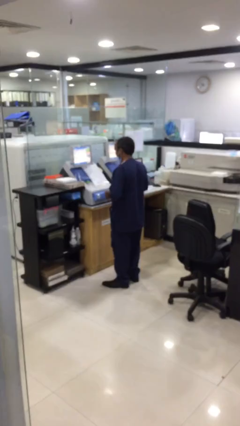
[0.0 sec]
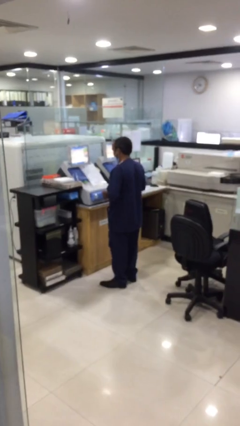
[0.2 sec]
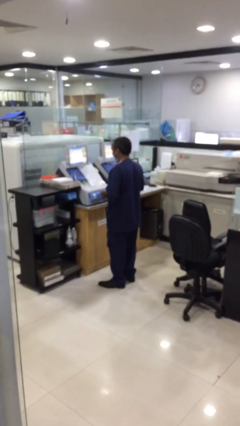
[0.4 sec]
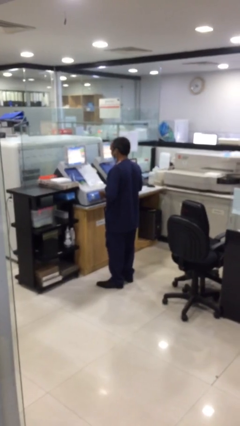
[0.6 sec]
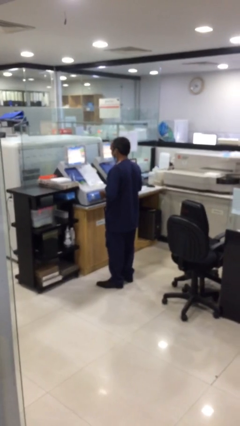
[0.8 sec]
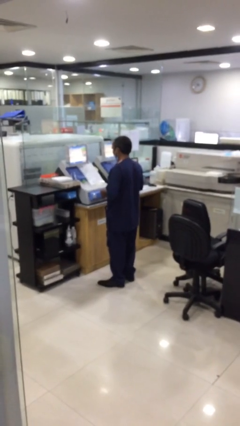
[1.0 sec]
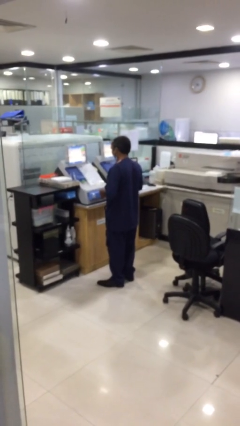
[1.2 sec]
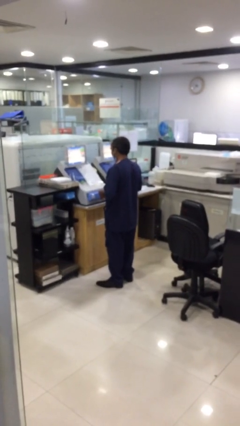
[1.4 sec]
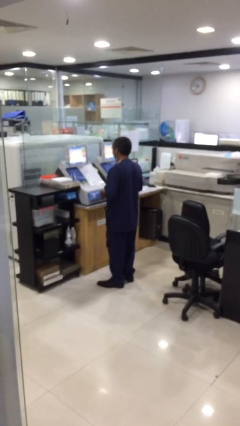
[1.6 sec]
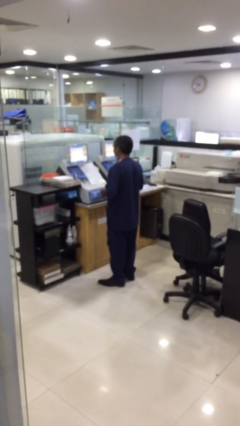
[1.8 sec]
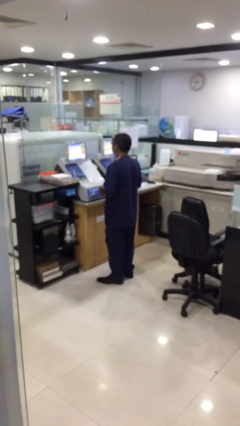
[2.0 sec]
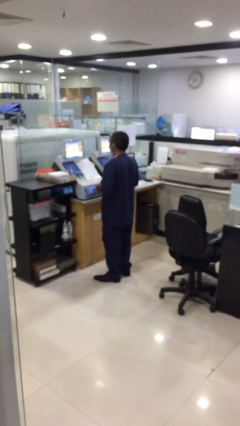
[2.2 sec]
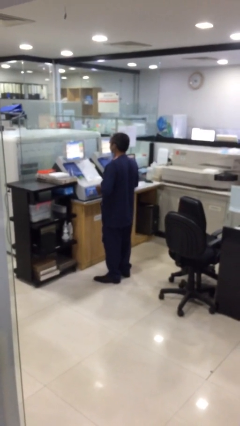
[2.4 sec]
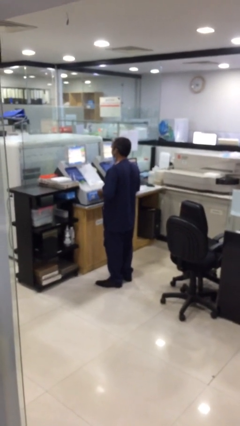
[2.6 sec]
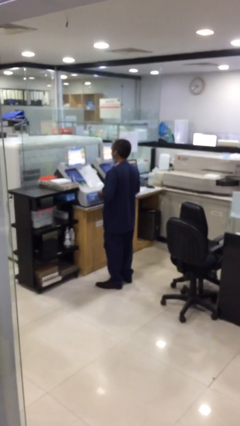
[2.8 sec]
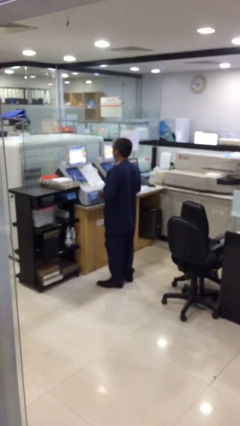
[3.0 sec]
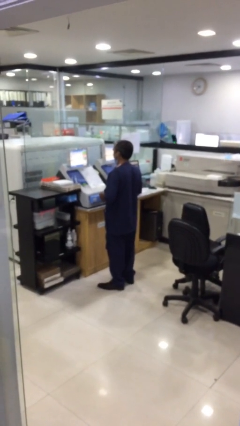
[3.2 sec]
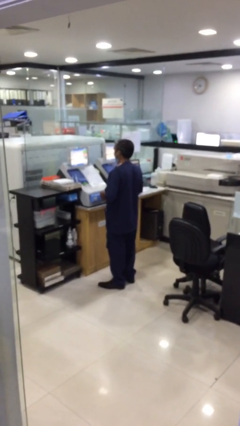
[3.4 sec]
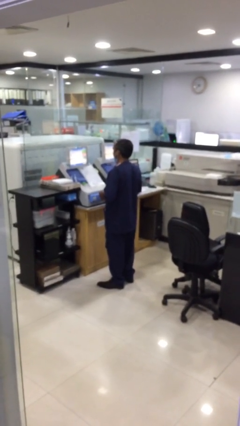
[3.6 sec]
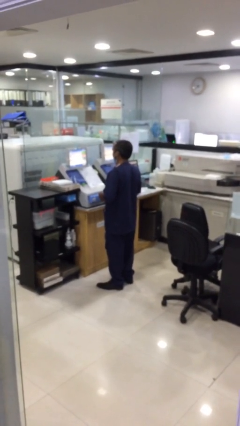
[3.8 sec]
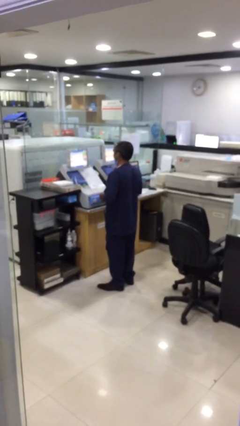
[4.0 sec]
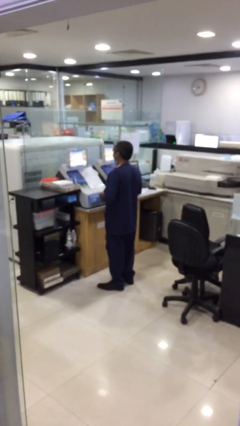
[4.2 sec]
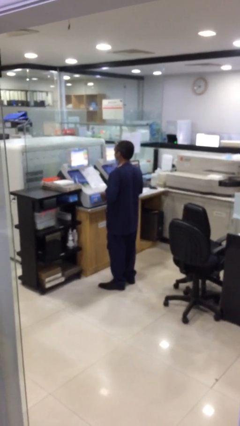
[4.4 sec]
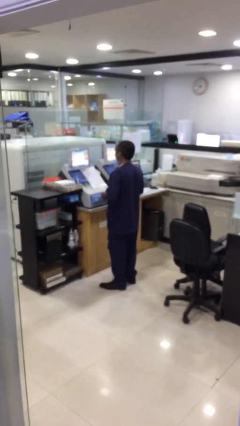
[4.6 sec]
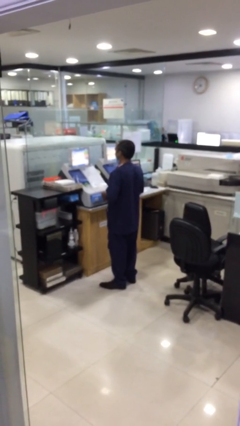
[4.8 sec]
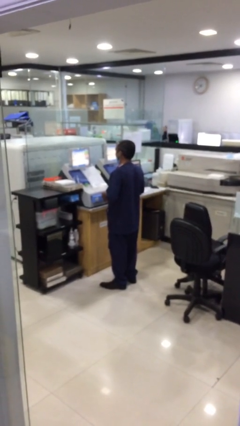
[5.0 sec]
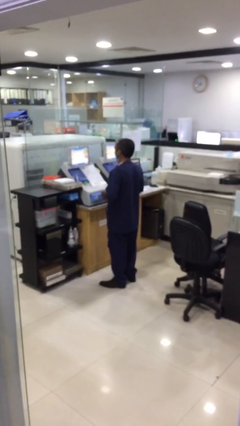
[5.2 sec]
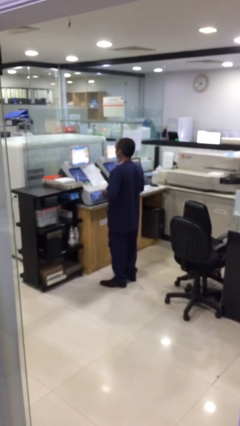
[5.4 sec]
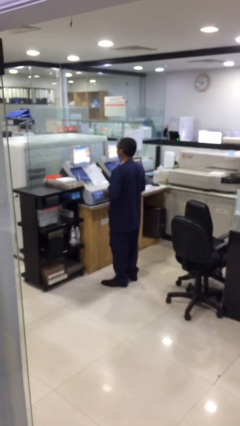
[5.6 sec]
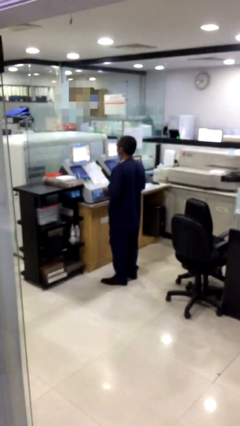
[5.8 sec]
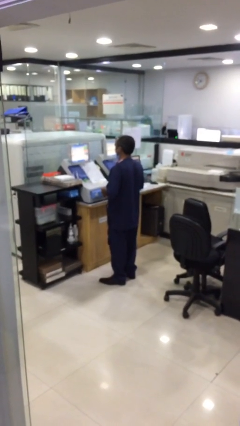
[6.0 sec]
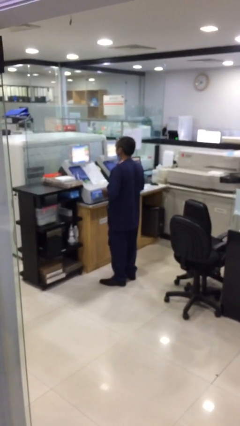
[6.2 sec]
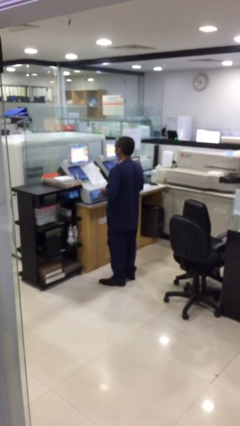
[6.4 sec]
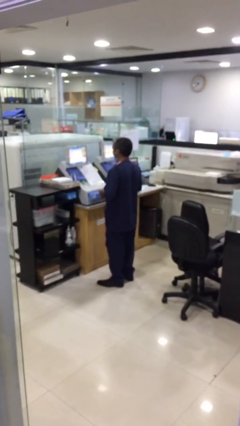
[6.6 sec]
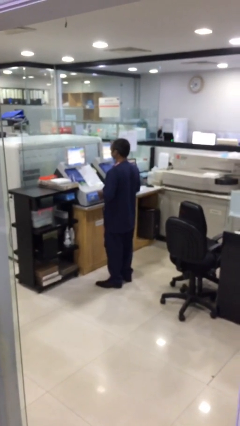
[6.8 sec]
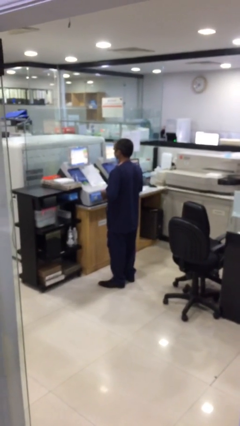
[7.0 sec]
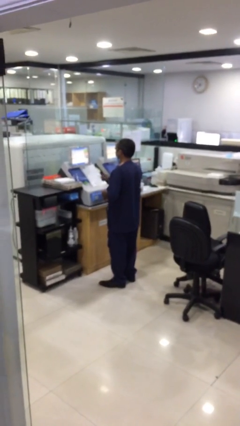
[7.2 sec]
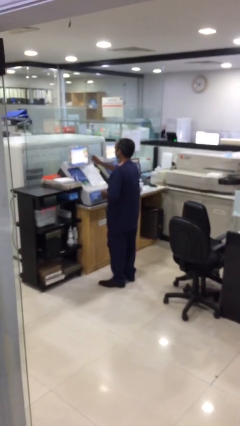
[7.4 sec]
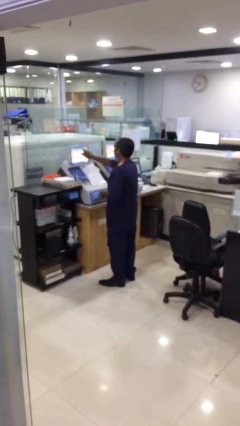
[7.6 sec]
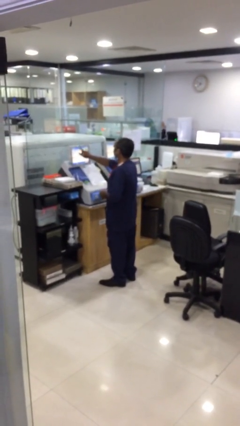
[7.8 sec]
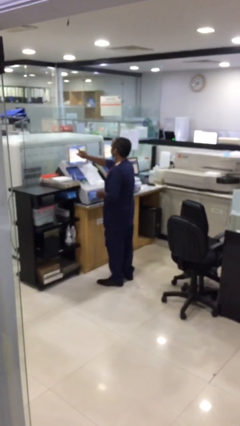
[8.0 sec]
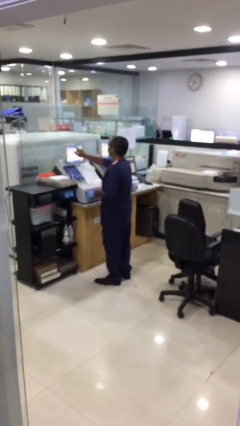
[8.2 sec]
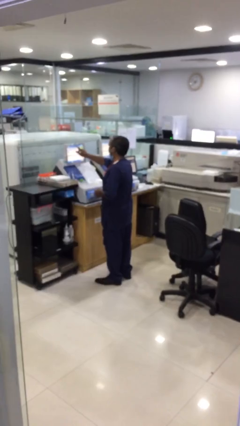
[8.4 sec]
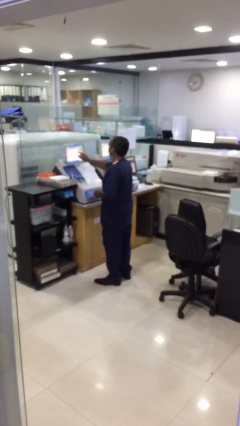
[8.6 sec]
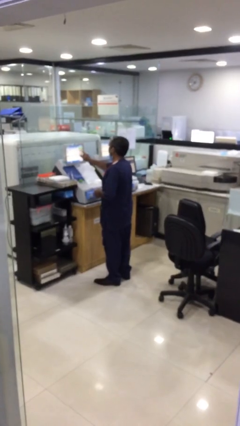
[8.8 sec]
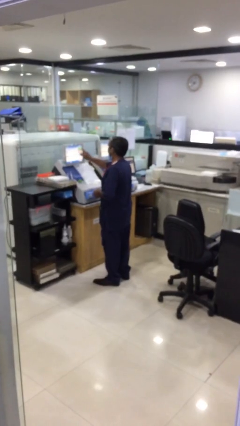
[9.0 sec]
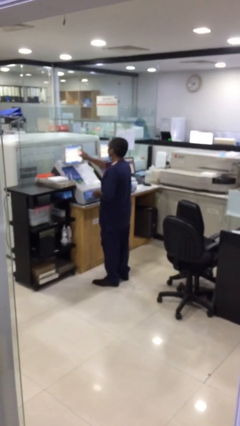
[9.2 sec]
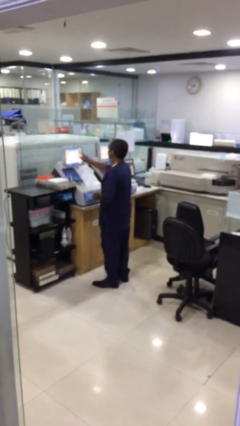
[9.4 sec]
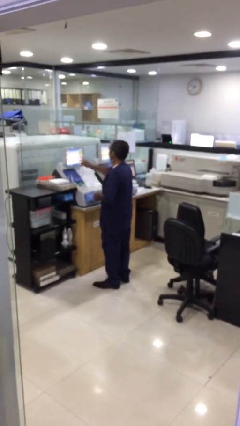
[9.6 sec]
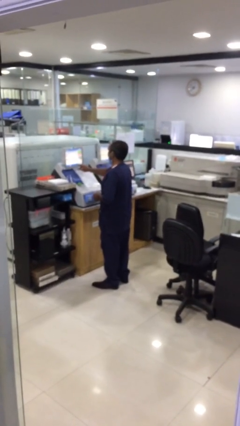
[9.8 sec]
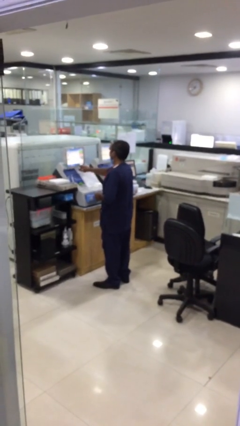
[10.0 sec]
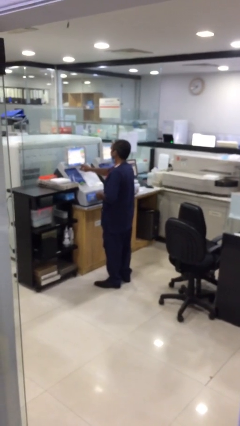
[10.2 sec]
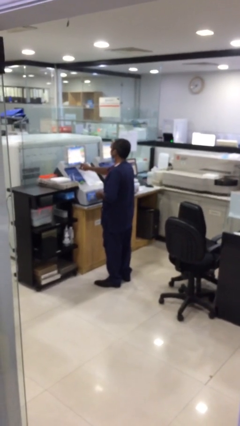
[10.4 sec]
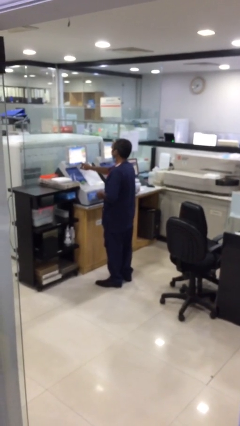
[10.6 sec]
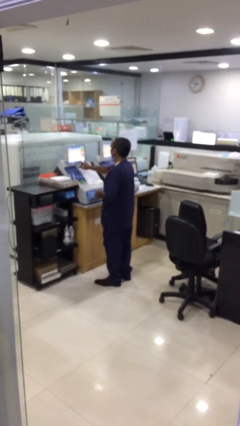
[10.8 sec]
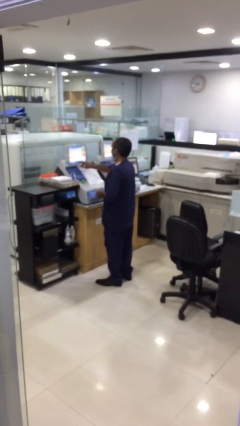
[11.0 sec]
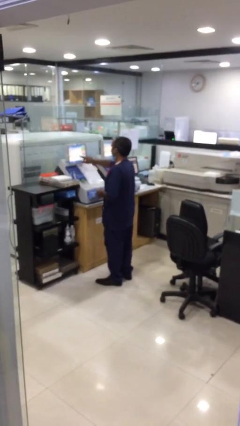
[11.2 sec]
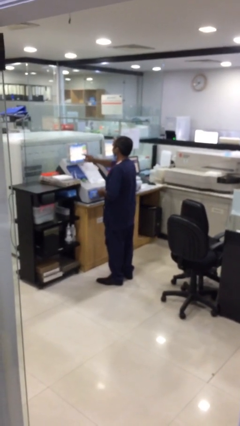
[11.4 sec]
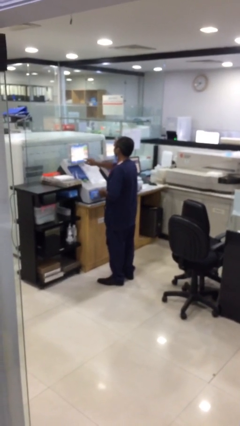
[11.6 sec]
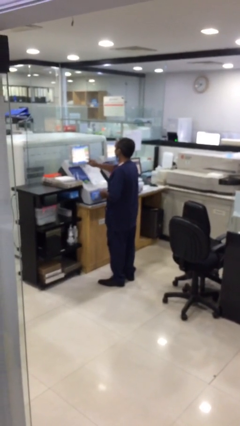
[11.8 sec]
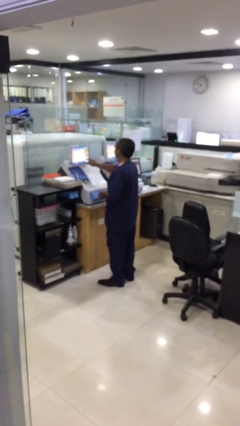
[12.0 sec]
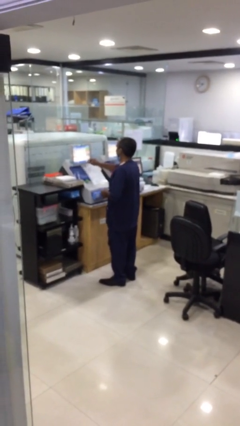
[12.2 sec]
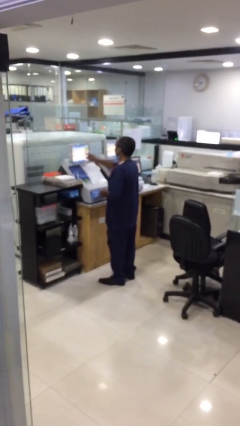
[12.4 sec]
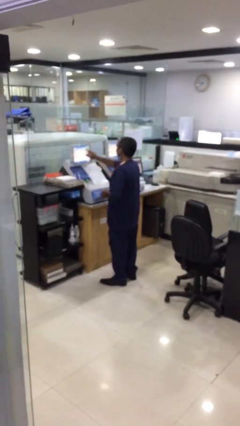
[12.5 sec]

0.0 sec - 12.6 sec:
person purchases from machine

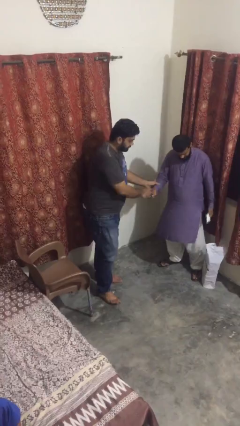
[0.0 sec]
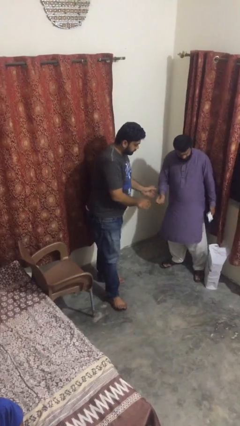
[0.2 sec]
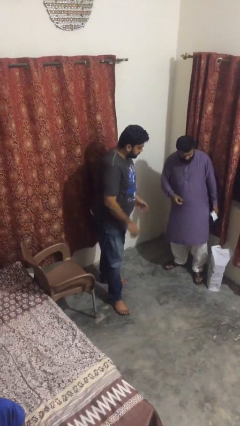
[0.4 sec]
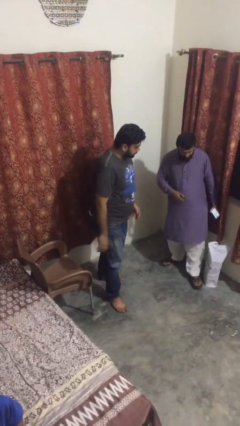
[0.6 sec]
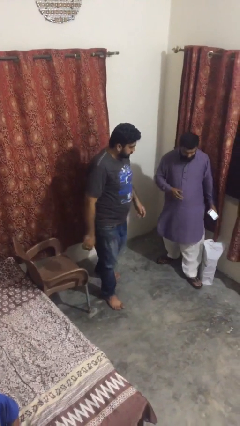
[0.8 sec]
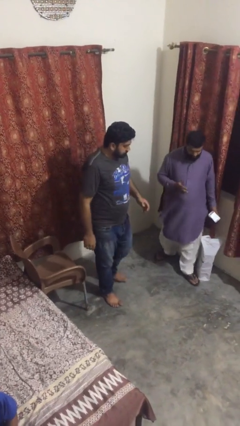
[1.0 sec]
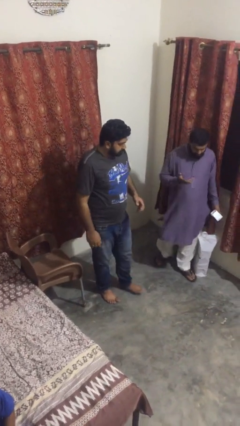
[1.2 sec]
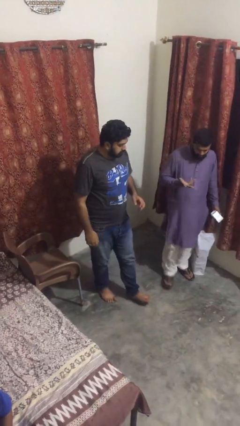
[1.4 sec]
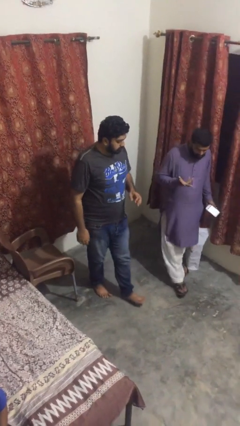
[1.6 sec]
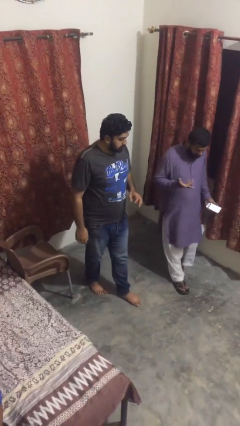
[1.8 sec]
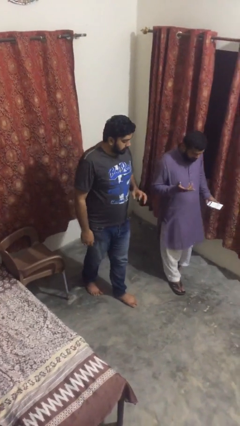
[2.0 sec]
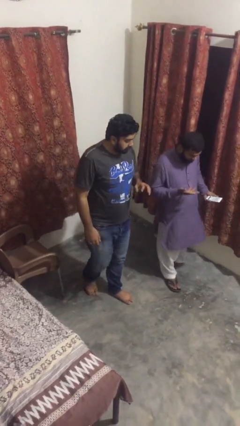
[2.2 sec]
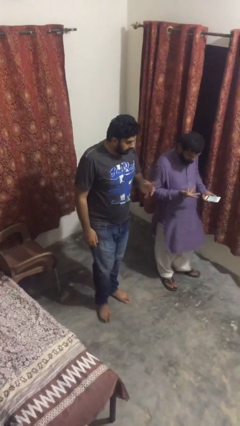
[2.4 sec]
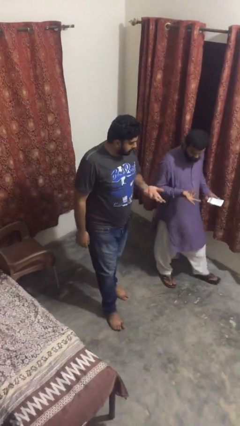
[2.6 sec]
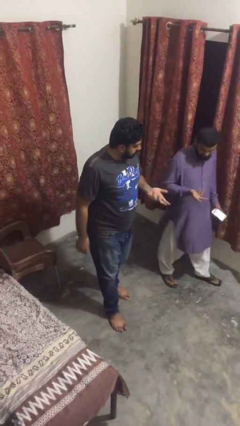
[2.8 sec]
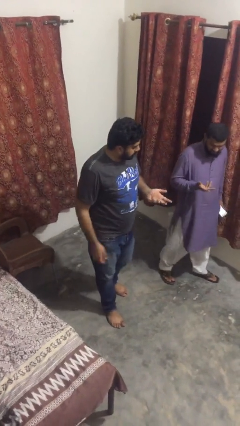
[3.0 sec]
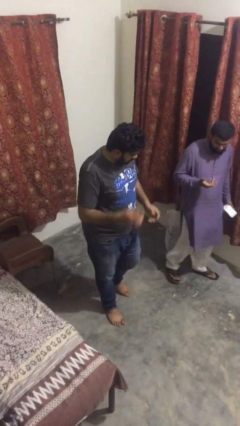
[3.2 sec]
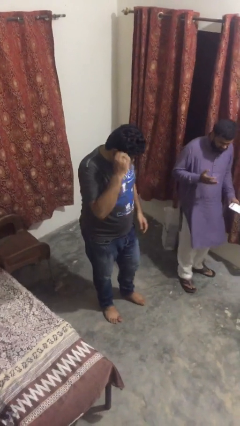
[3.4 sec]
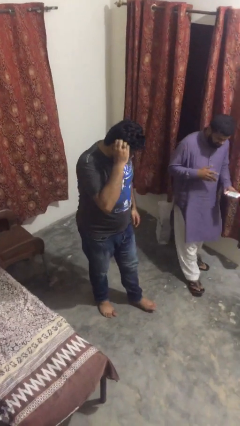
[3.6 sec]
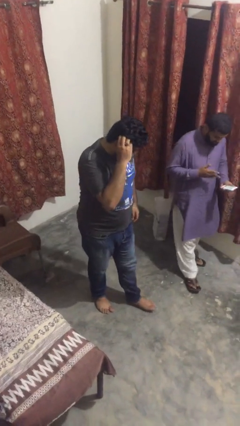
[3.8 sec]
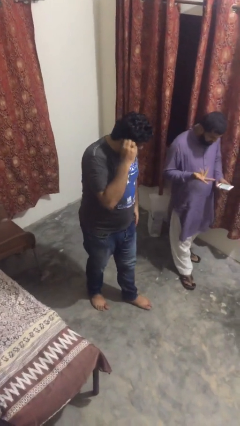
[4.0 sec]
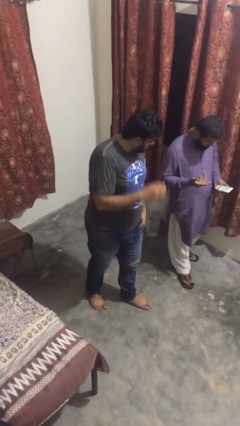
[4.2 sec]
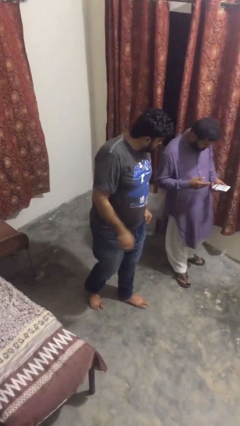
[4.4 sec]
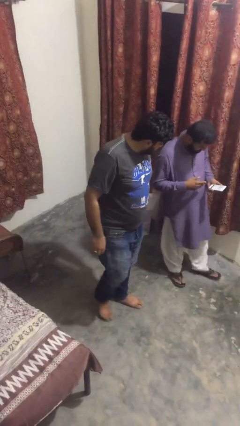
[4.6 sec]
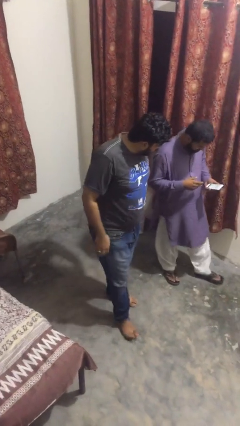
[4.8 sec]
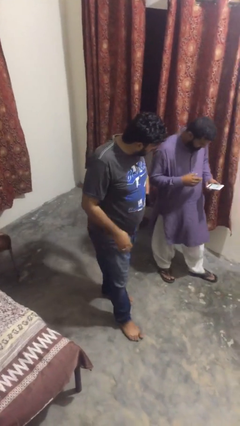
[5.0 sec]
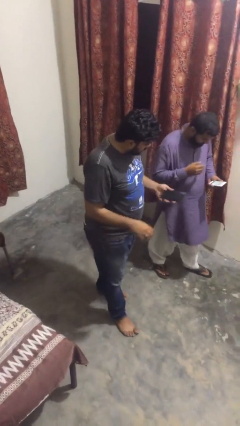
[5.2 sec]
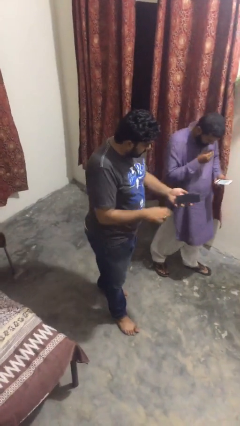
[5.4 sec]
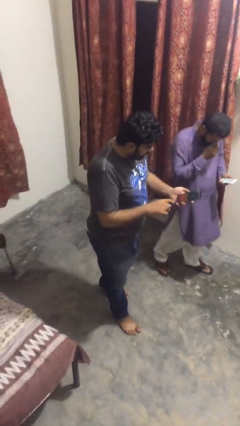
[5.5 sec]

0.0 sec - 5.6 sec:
person talks to person
